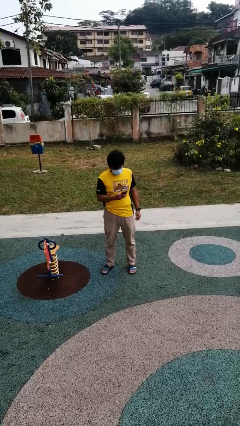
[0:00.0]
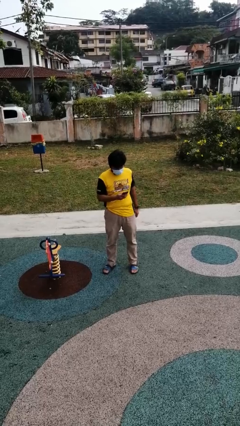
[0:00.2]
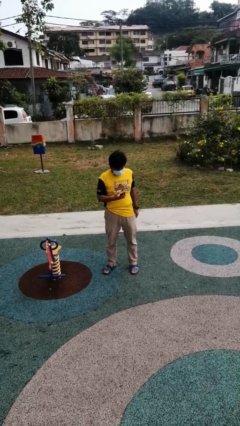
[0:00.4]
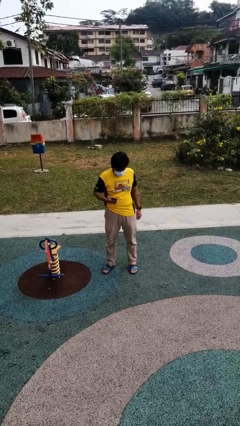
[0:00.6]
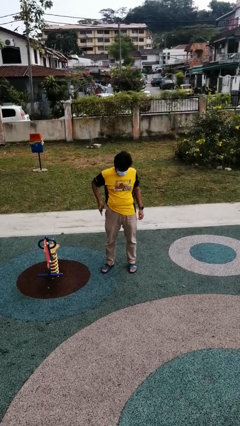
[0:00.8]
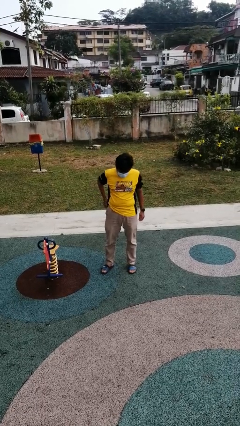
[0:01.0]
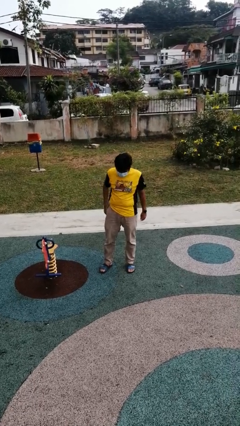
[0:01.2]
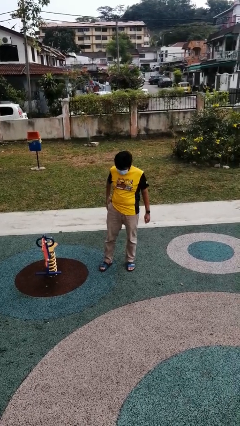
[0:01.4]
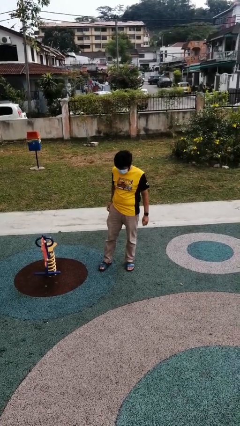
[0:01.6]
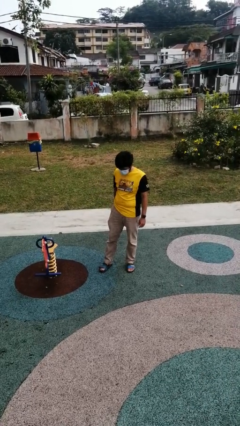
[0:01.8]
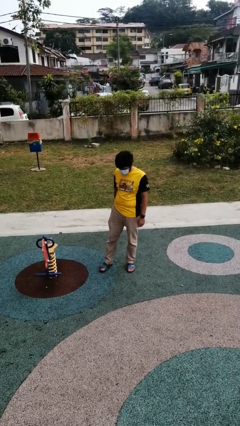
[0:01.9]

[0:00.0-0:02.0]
person puts phone into pocket

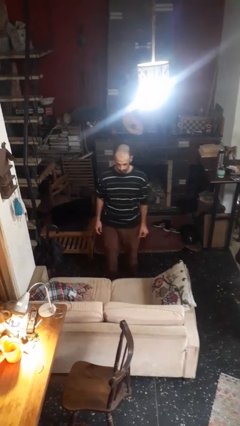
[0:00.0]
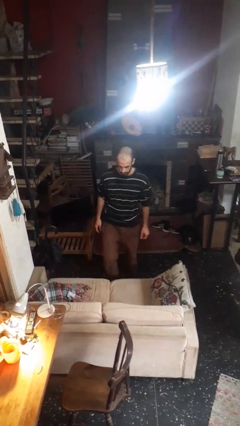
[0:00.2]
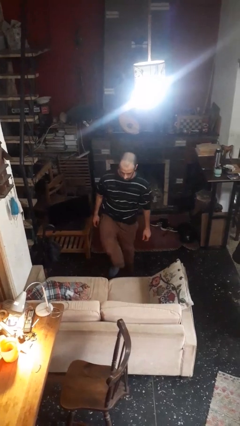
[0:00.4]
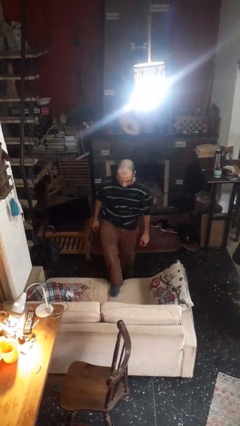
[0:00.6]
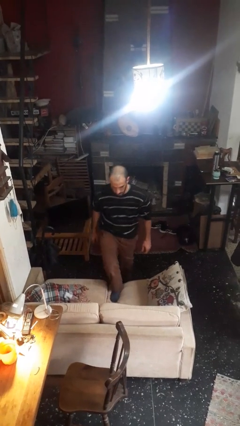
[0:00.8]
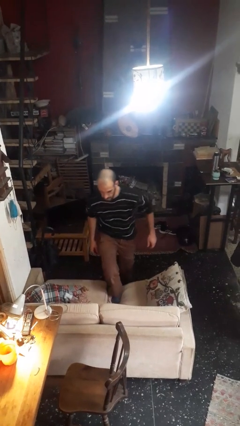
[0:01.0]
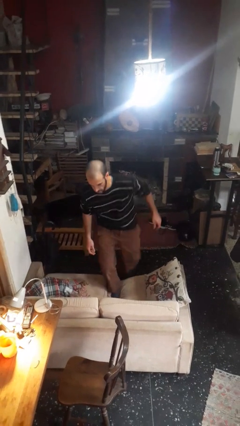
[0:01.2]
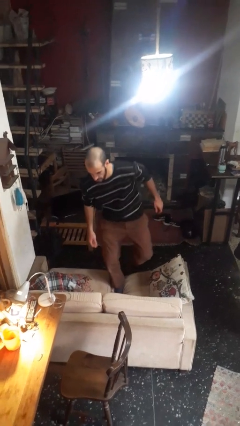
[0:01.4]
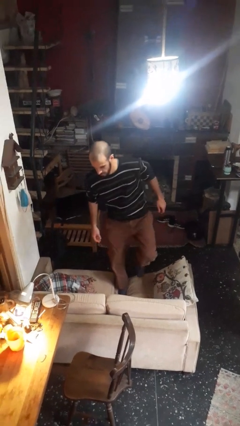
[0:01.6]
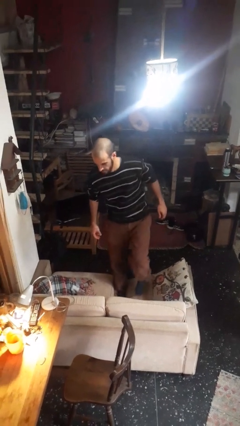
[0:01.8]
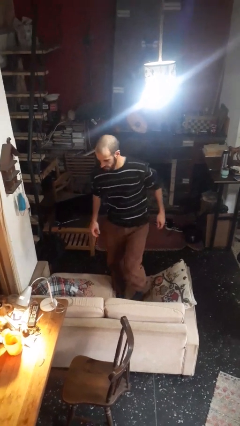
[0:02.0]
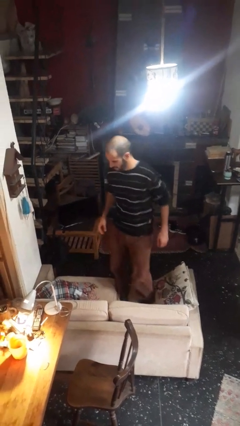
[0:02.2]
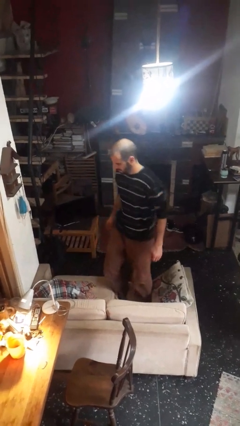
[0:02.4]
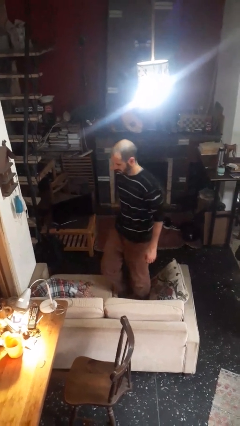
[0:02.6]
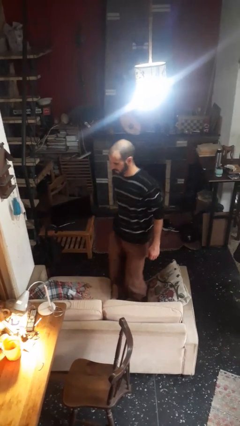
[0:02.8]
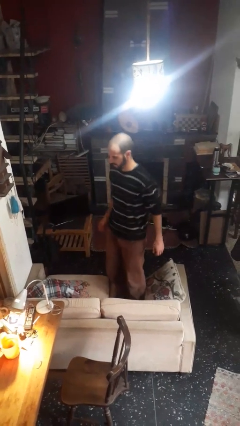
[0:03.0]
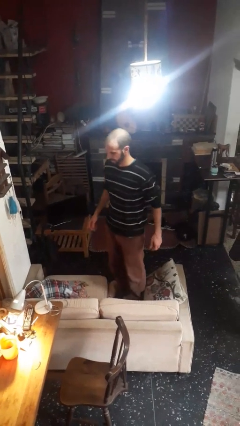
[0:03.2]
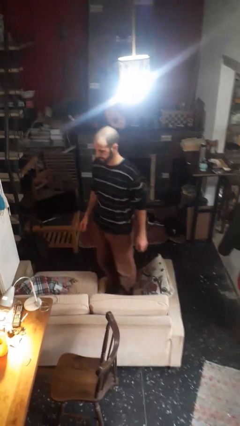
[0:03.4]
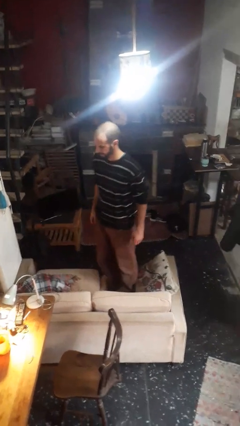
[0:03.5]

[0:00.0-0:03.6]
person climbs on couch

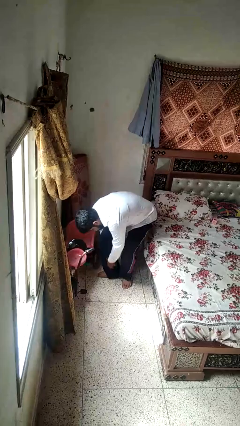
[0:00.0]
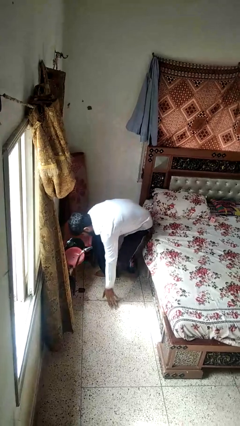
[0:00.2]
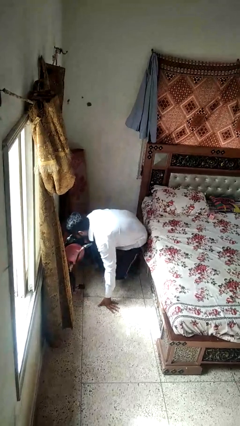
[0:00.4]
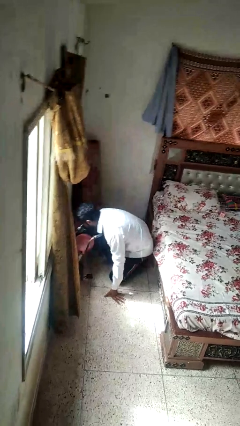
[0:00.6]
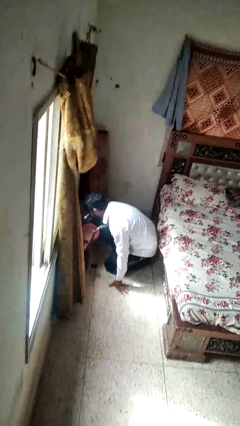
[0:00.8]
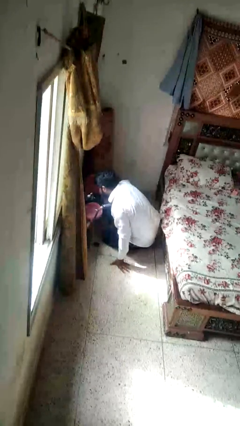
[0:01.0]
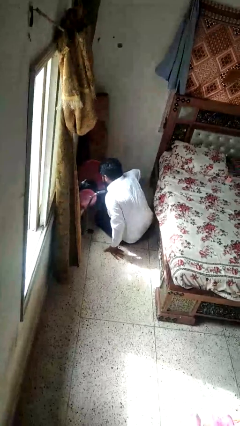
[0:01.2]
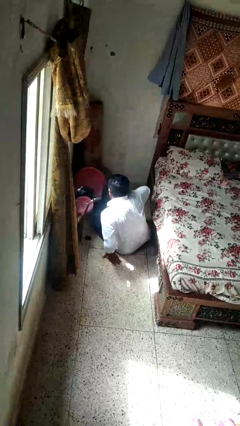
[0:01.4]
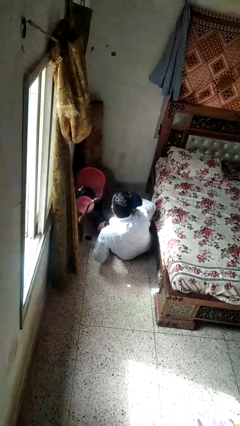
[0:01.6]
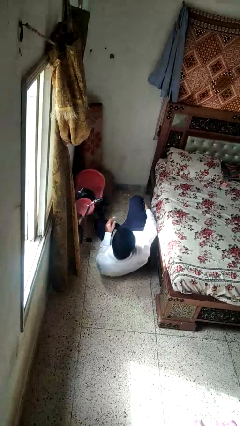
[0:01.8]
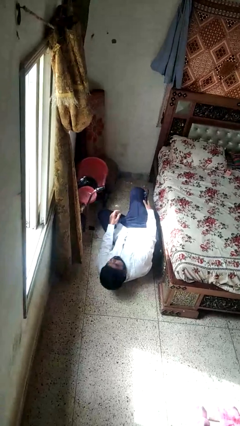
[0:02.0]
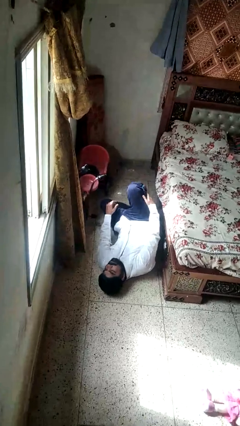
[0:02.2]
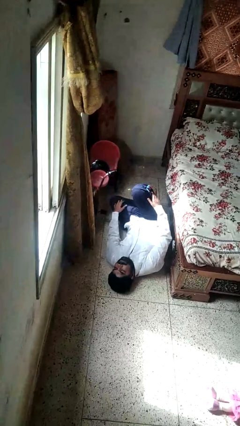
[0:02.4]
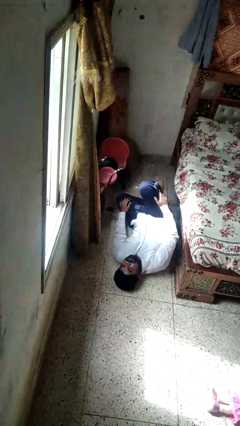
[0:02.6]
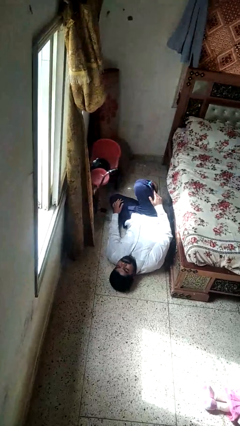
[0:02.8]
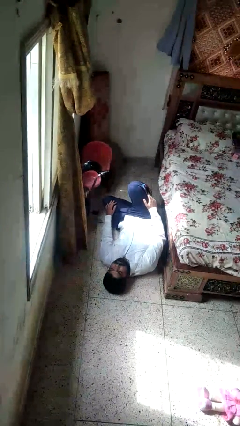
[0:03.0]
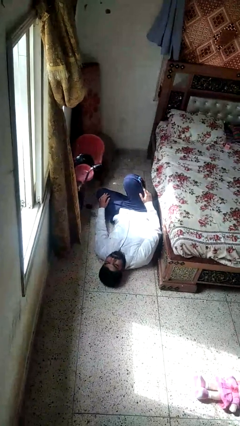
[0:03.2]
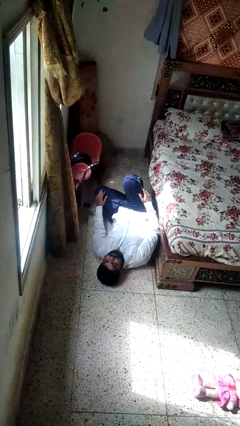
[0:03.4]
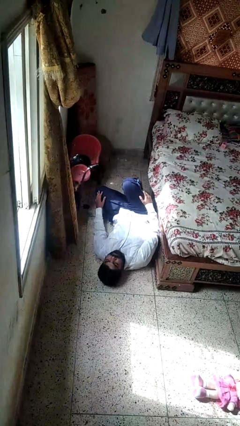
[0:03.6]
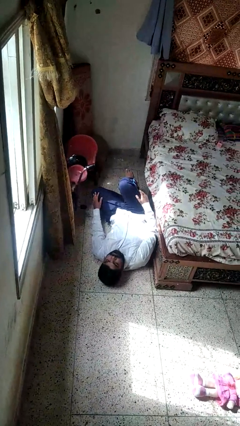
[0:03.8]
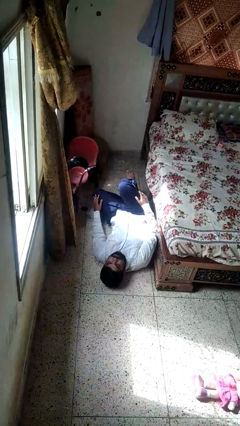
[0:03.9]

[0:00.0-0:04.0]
person lies down on floor

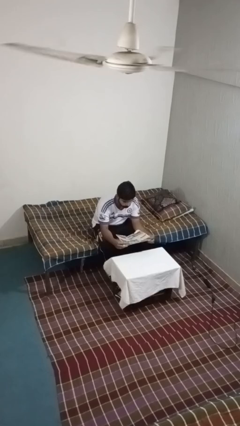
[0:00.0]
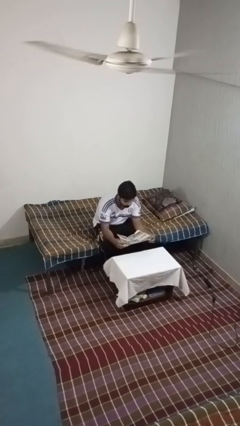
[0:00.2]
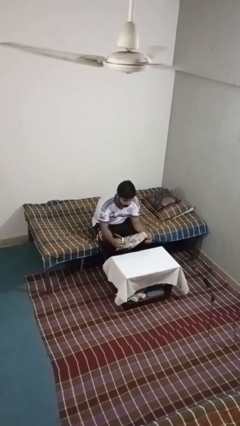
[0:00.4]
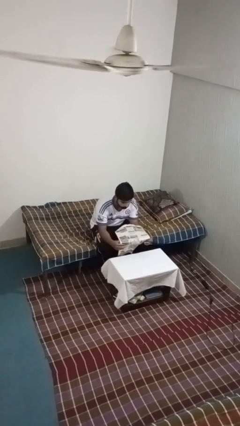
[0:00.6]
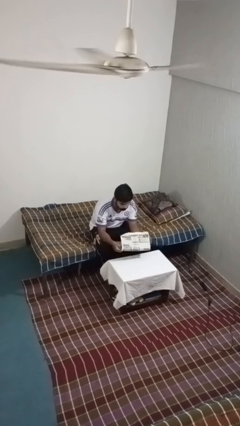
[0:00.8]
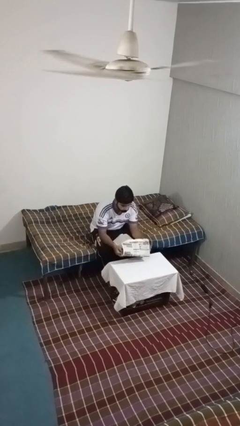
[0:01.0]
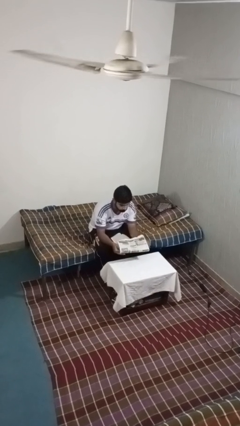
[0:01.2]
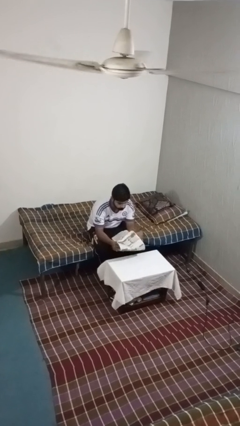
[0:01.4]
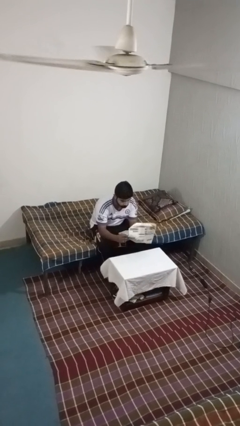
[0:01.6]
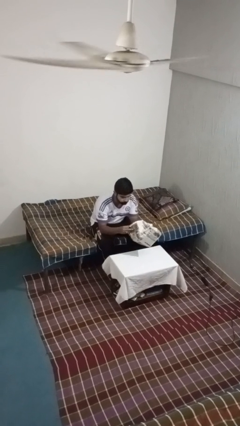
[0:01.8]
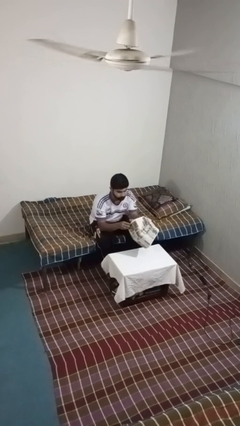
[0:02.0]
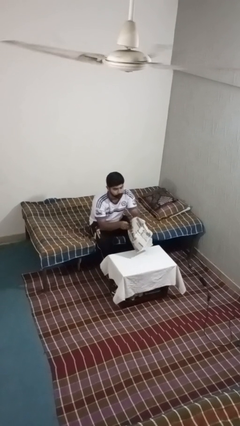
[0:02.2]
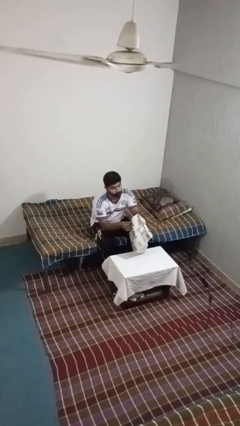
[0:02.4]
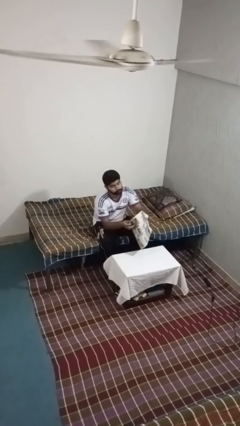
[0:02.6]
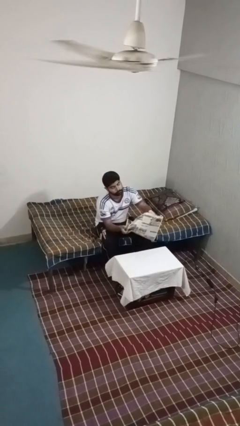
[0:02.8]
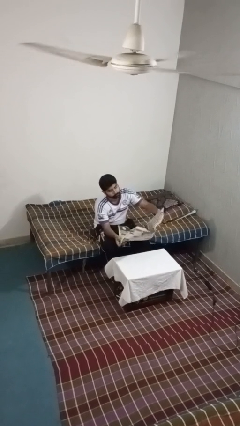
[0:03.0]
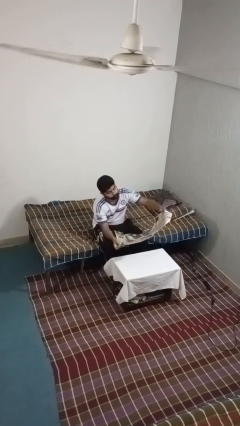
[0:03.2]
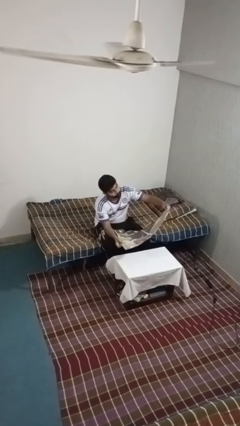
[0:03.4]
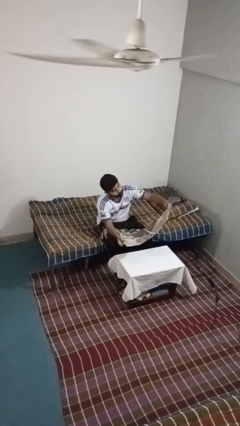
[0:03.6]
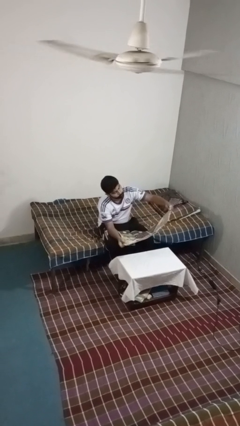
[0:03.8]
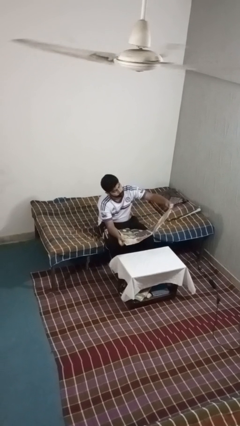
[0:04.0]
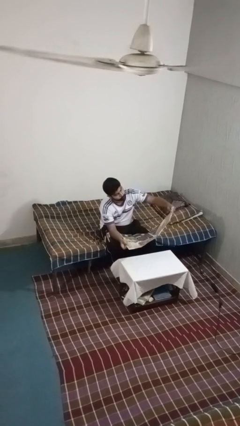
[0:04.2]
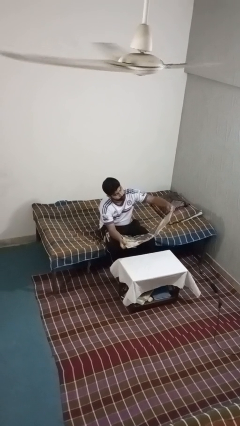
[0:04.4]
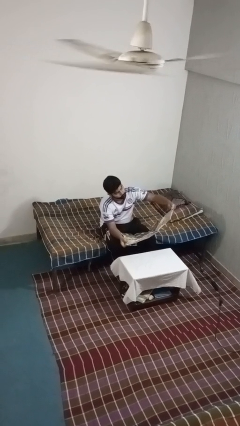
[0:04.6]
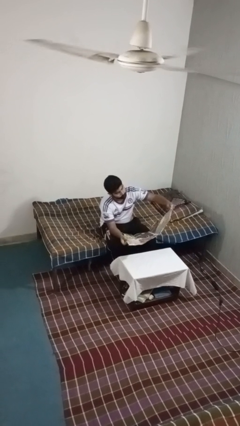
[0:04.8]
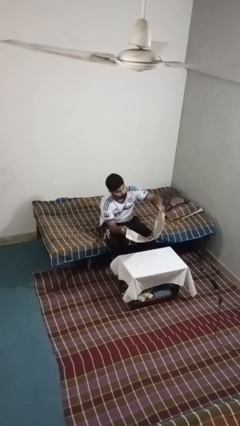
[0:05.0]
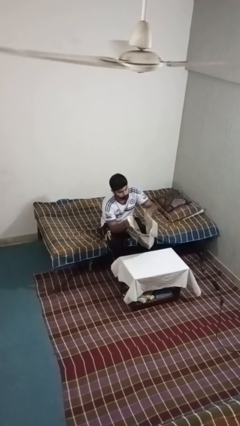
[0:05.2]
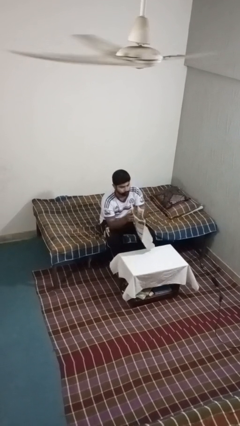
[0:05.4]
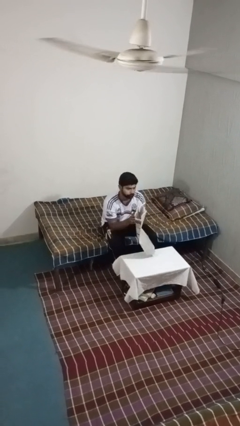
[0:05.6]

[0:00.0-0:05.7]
person reads newspaper

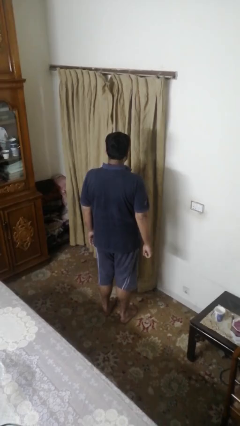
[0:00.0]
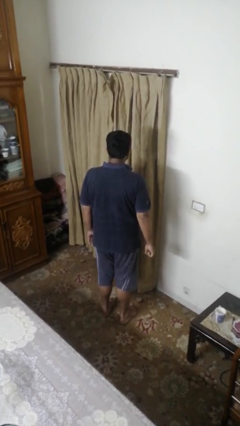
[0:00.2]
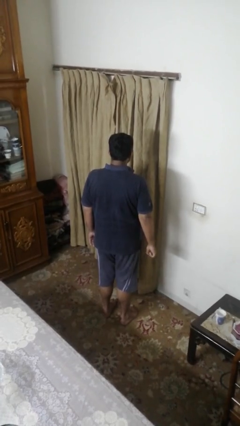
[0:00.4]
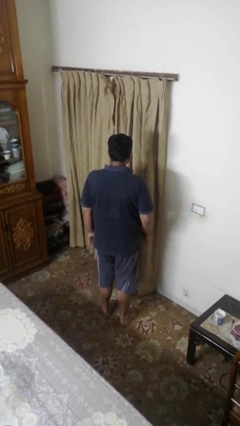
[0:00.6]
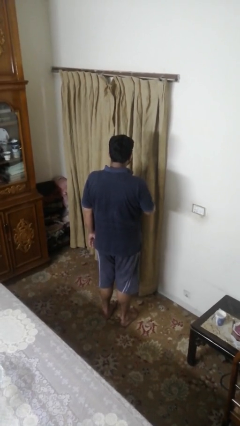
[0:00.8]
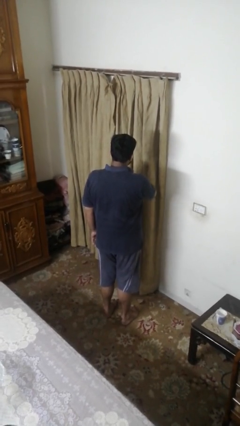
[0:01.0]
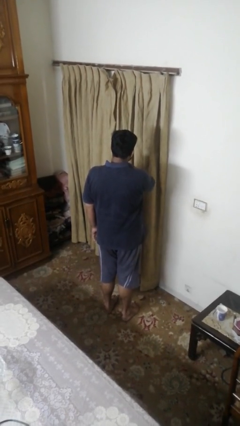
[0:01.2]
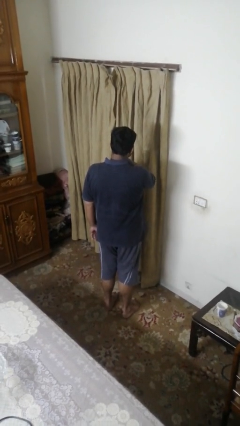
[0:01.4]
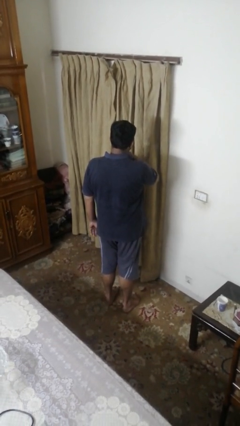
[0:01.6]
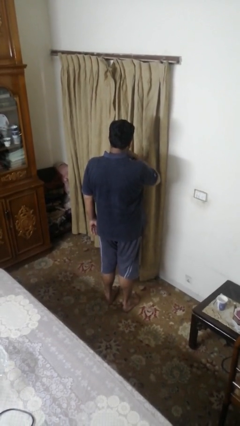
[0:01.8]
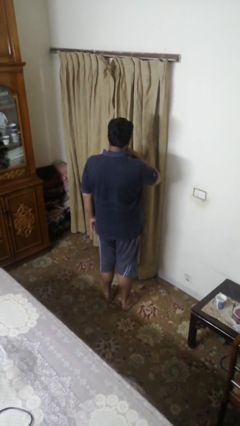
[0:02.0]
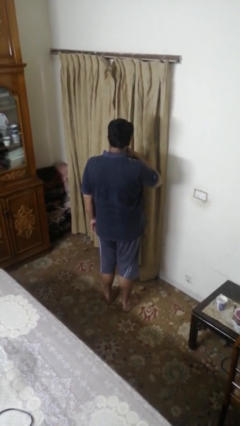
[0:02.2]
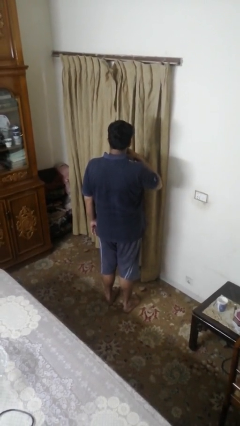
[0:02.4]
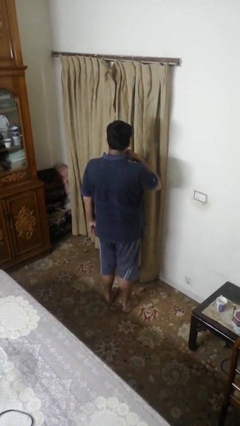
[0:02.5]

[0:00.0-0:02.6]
person gestures cut
